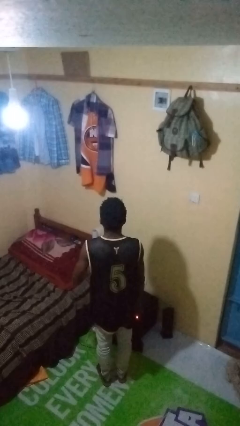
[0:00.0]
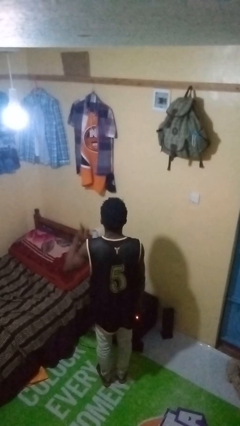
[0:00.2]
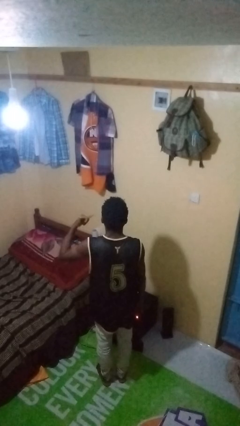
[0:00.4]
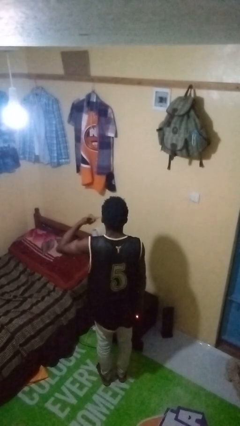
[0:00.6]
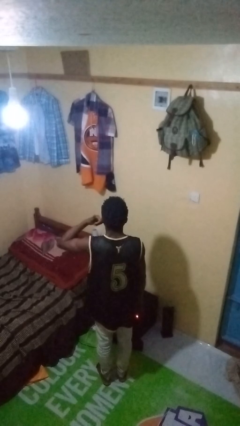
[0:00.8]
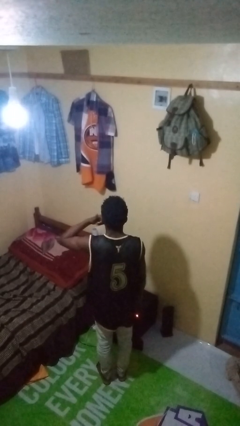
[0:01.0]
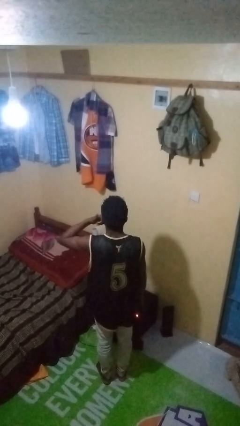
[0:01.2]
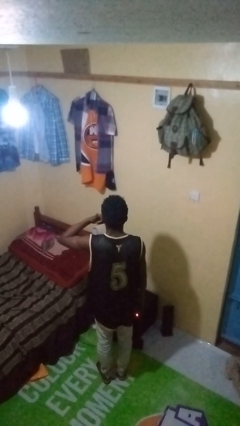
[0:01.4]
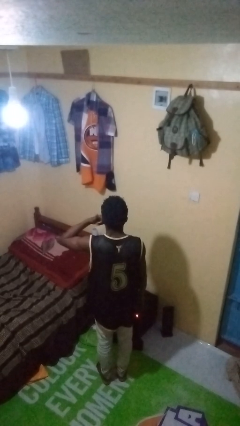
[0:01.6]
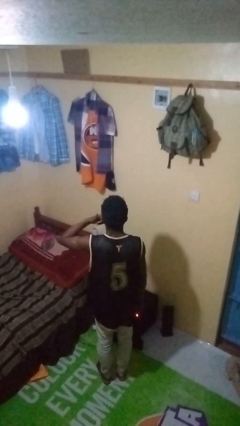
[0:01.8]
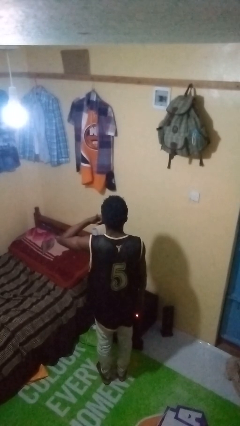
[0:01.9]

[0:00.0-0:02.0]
person gestures call me

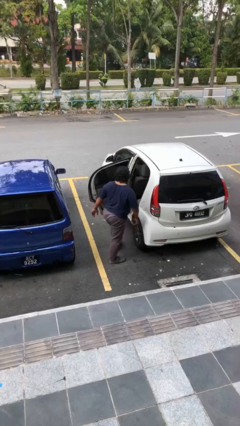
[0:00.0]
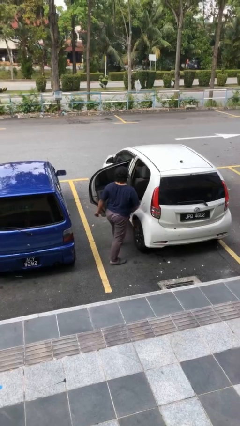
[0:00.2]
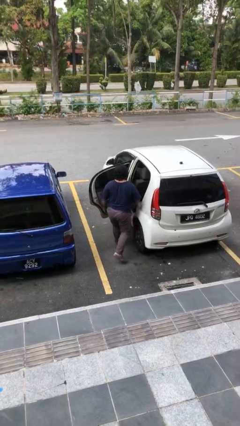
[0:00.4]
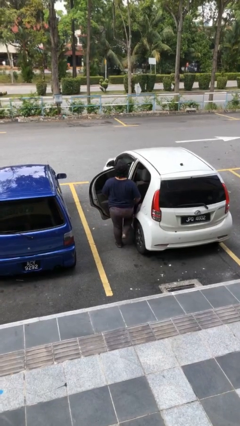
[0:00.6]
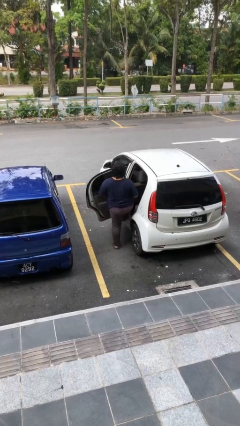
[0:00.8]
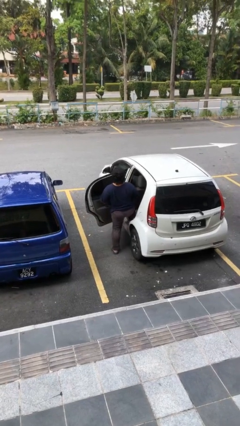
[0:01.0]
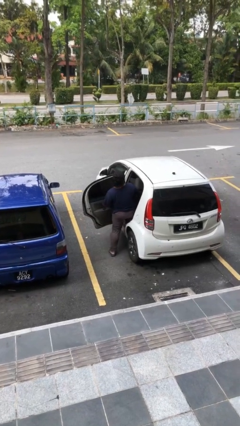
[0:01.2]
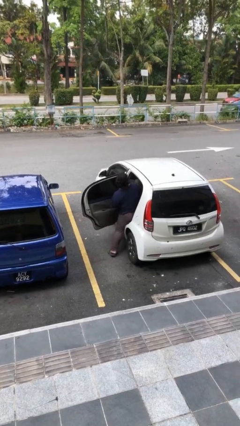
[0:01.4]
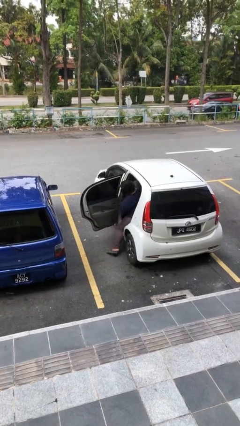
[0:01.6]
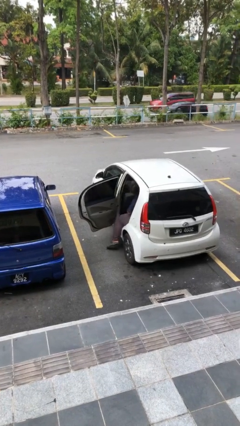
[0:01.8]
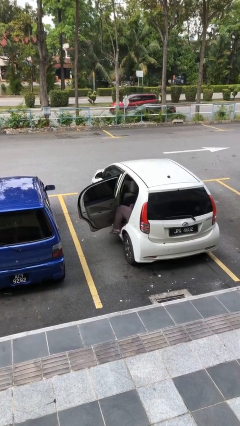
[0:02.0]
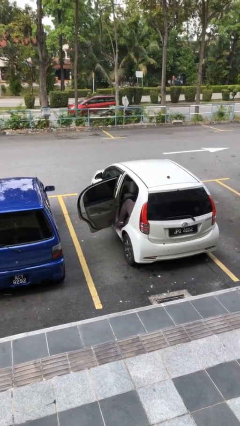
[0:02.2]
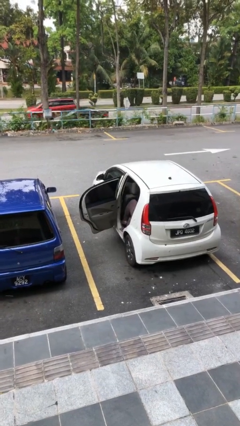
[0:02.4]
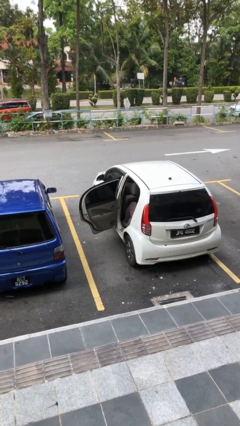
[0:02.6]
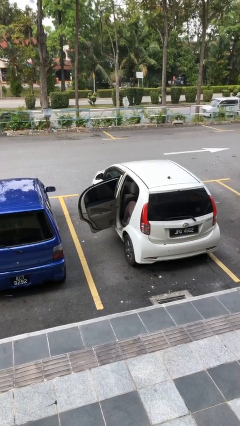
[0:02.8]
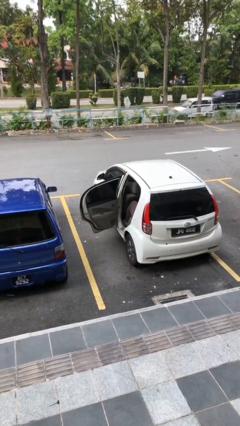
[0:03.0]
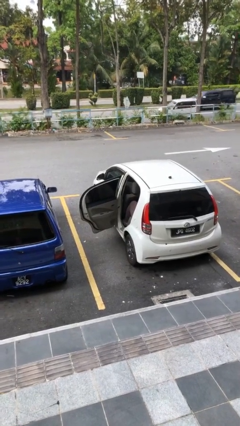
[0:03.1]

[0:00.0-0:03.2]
person enters car

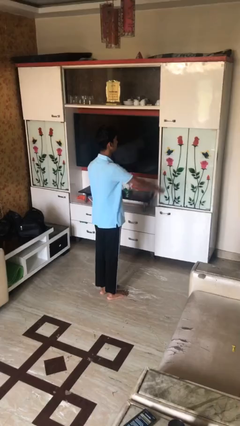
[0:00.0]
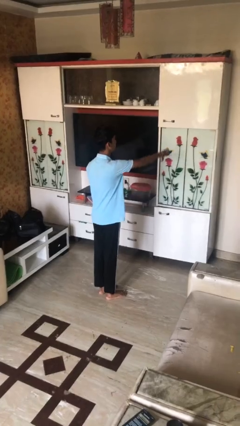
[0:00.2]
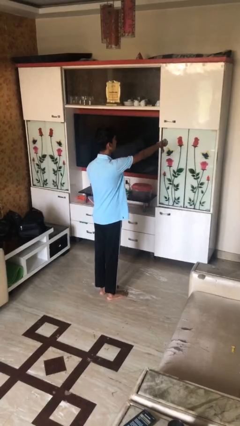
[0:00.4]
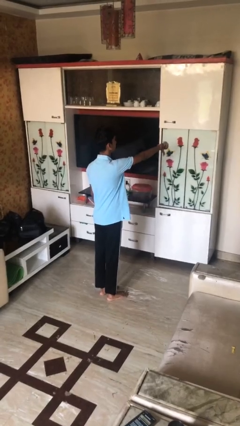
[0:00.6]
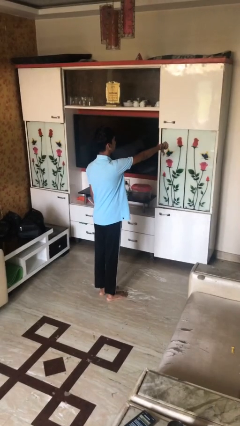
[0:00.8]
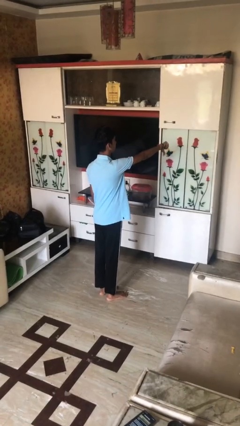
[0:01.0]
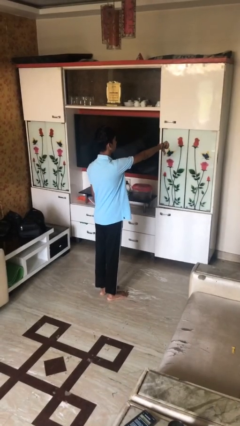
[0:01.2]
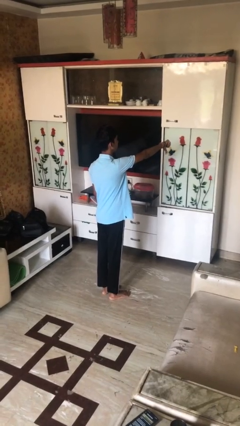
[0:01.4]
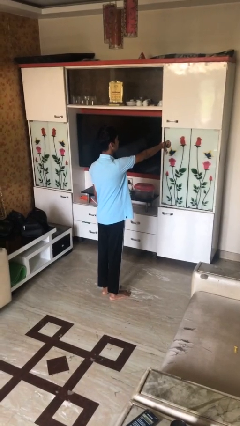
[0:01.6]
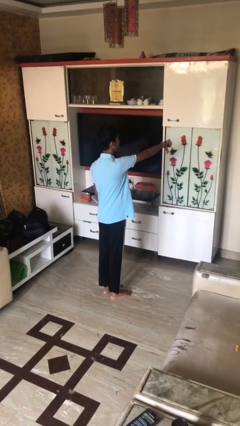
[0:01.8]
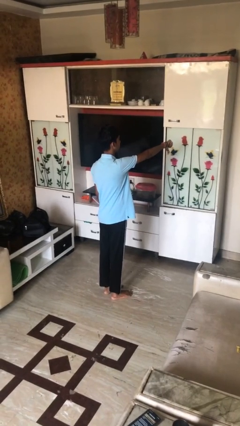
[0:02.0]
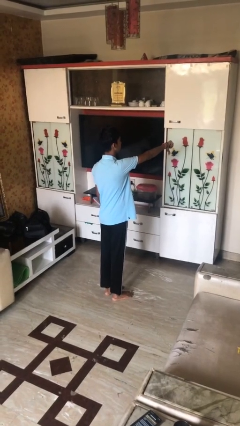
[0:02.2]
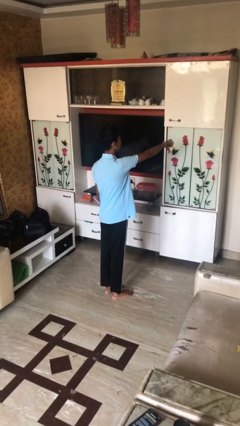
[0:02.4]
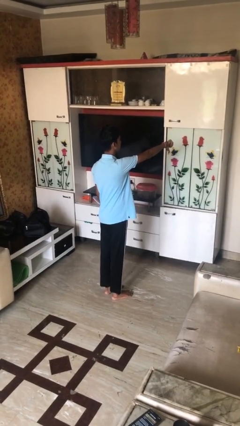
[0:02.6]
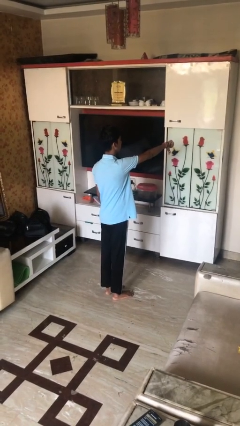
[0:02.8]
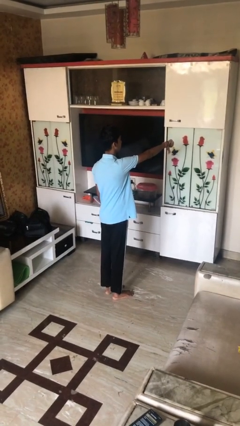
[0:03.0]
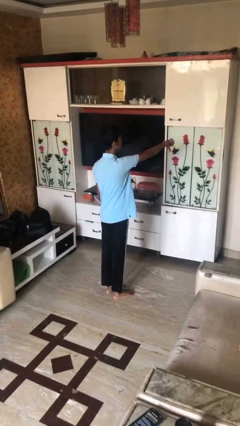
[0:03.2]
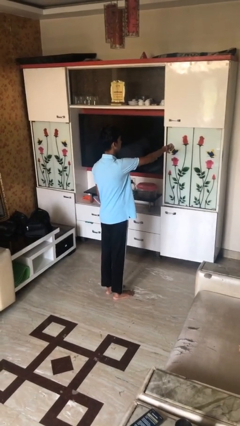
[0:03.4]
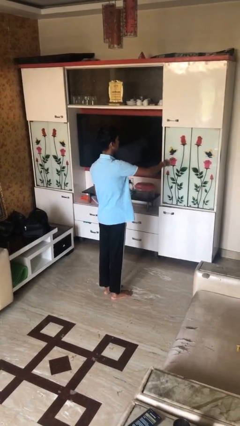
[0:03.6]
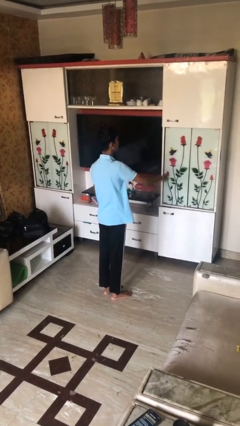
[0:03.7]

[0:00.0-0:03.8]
person gestures thumbs down

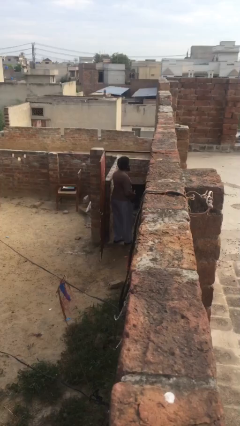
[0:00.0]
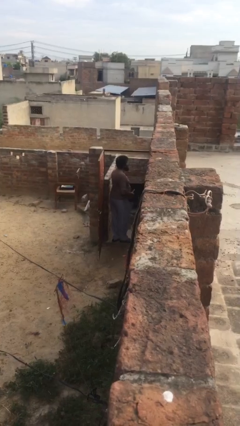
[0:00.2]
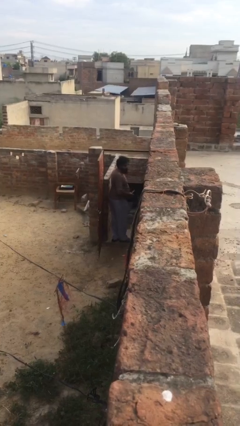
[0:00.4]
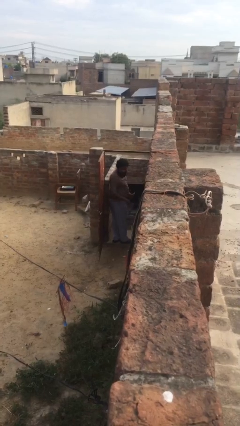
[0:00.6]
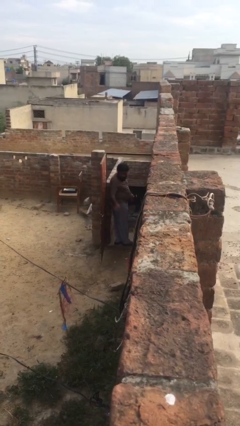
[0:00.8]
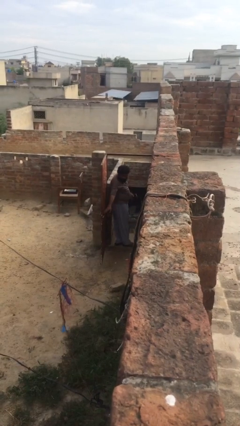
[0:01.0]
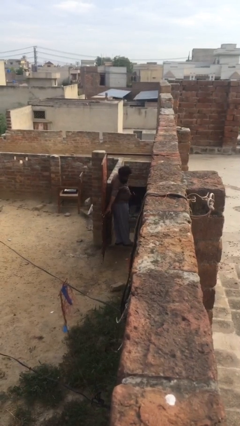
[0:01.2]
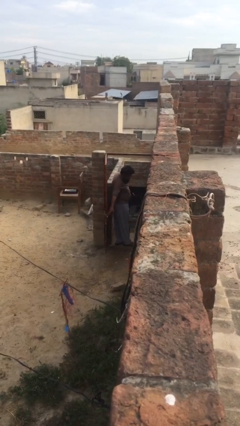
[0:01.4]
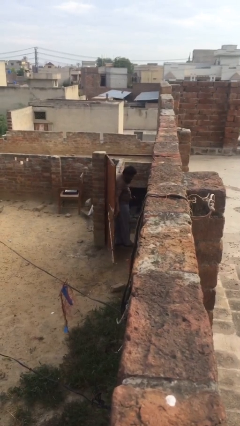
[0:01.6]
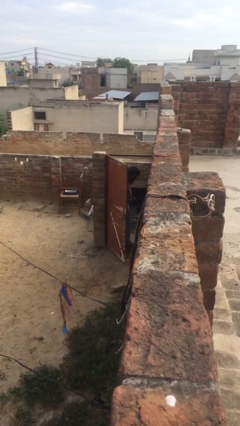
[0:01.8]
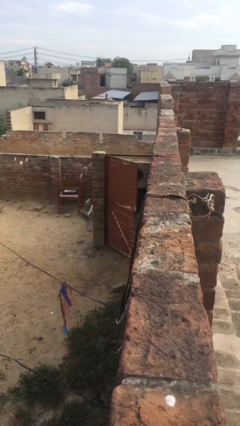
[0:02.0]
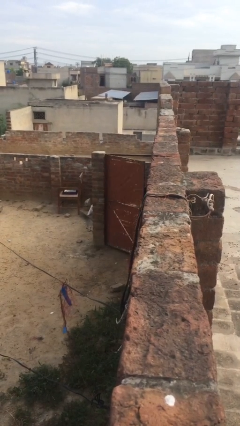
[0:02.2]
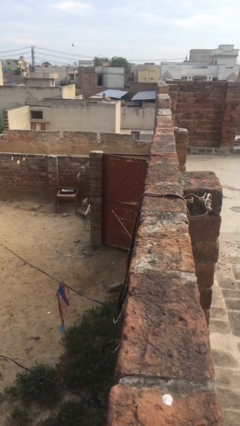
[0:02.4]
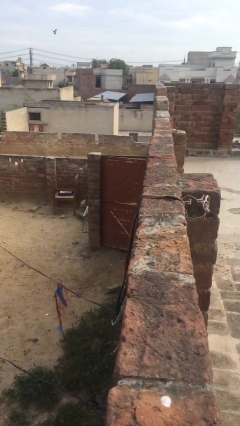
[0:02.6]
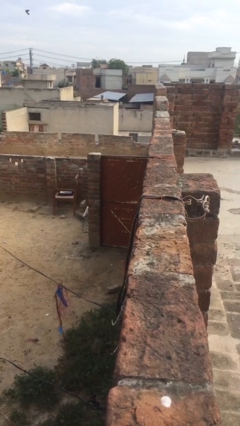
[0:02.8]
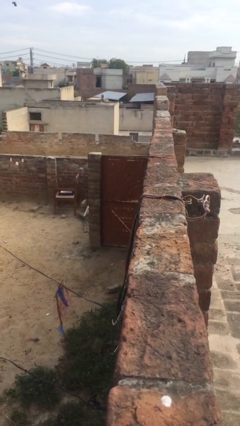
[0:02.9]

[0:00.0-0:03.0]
person closes facility door

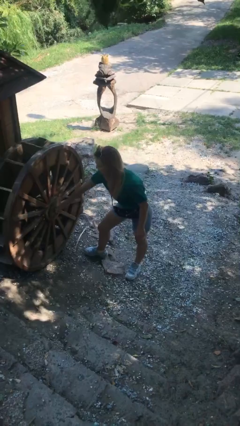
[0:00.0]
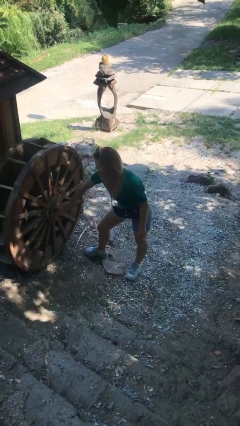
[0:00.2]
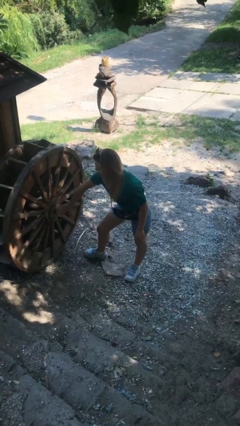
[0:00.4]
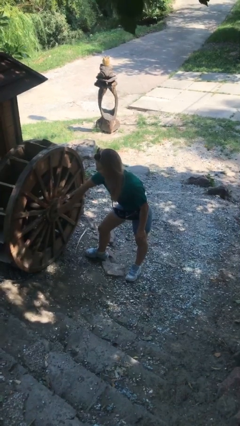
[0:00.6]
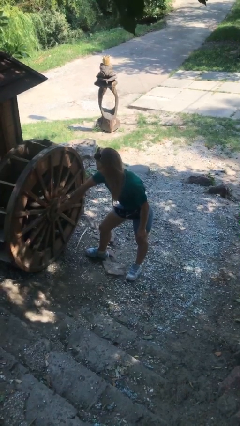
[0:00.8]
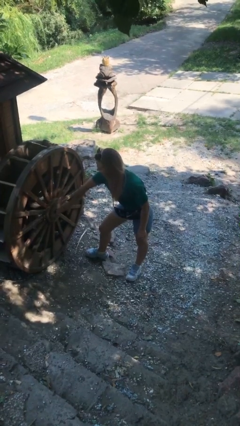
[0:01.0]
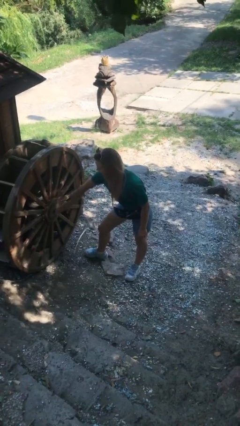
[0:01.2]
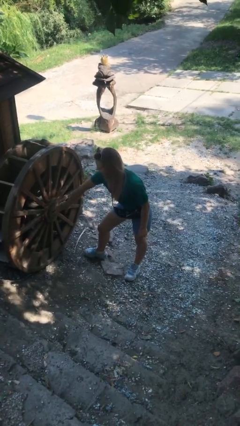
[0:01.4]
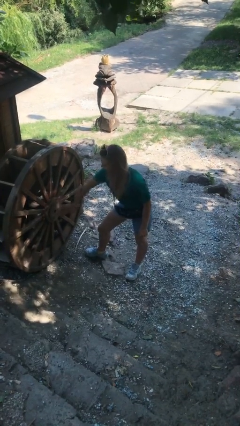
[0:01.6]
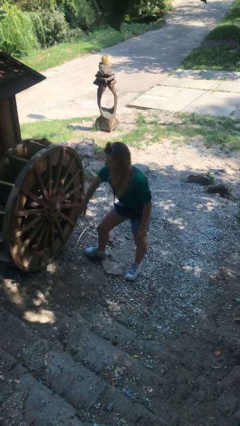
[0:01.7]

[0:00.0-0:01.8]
person taps object with finger

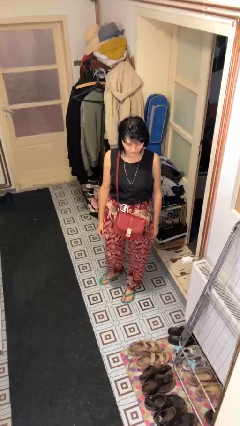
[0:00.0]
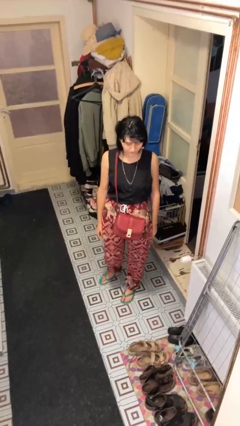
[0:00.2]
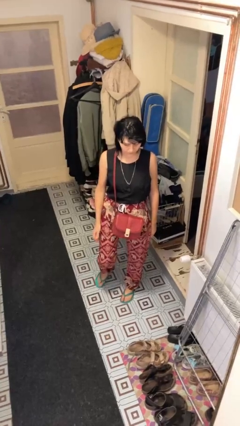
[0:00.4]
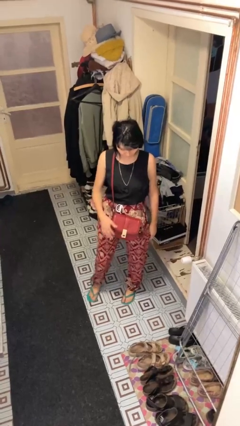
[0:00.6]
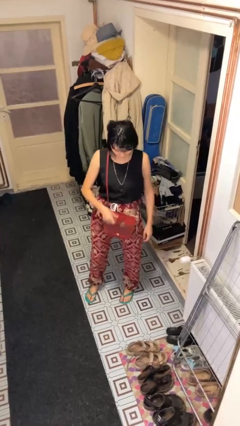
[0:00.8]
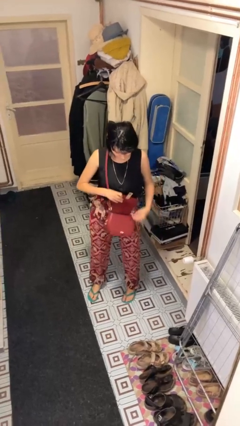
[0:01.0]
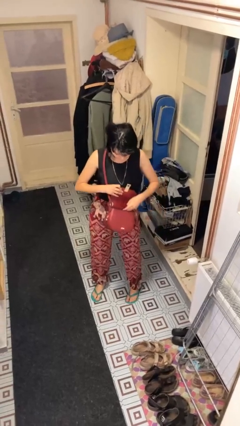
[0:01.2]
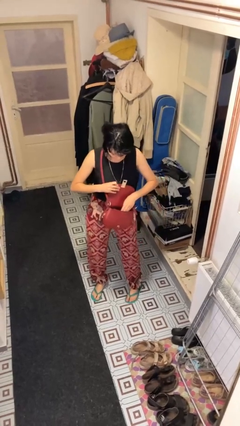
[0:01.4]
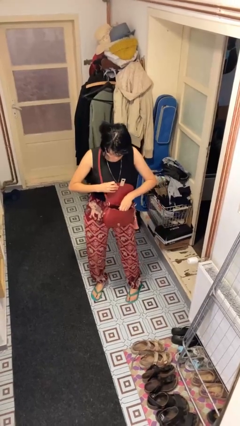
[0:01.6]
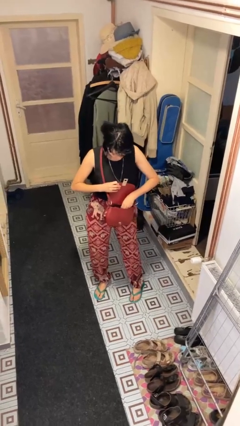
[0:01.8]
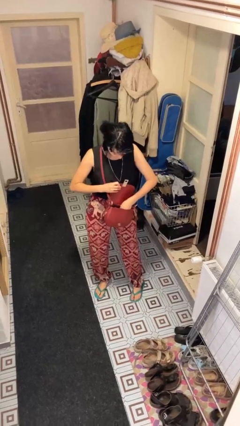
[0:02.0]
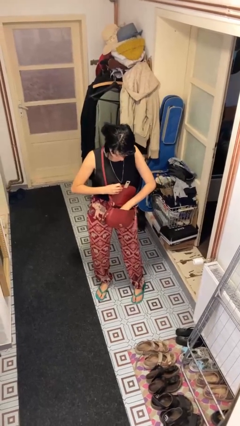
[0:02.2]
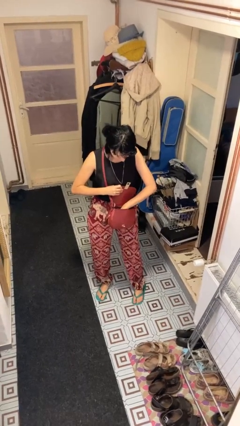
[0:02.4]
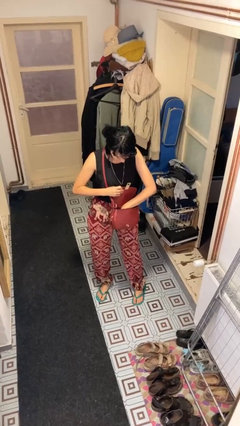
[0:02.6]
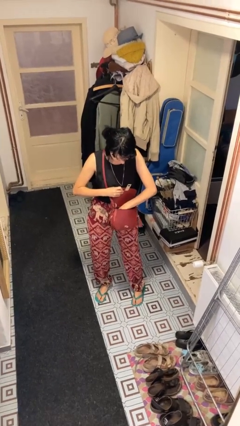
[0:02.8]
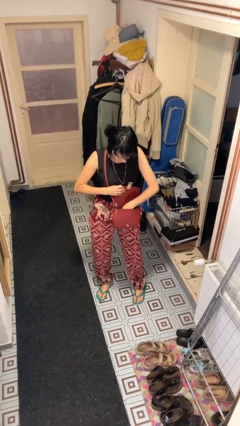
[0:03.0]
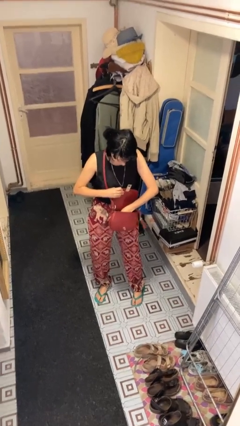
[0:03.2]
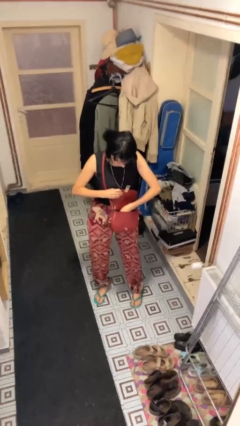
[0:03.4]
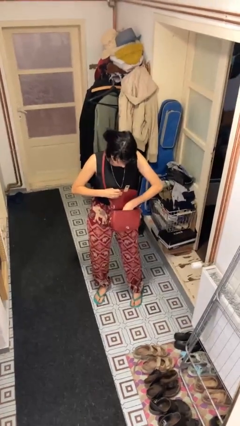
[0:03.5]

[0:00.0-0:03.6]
person searches in purse
